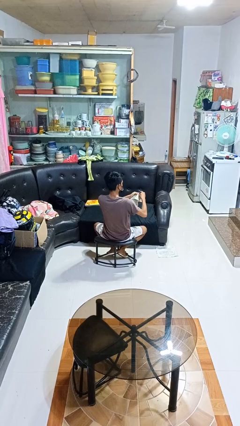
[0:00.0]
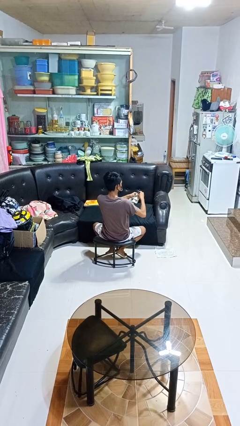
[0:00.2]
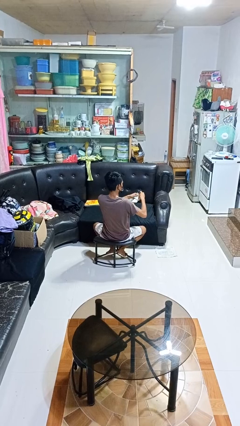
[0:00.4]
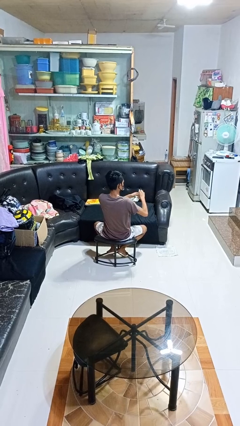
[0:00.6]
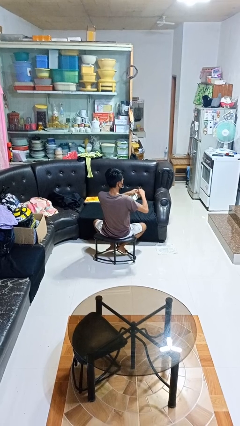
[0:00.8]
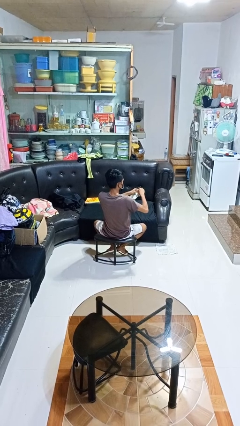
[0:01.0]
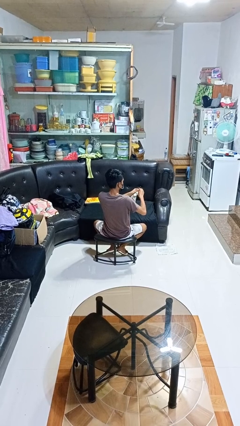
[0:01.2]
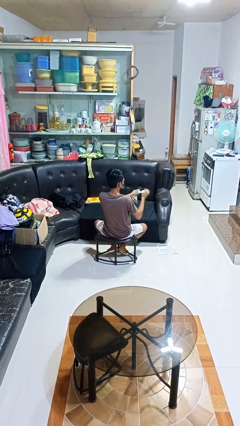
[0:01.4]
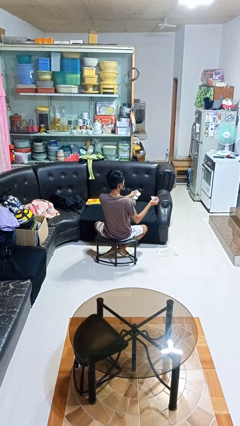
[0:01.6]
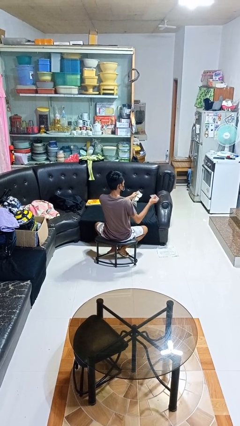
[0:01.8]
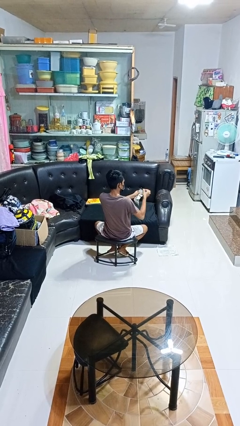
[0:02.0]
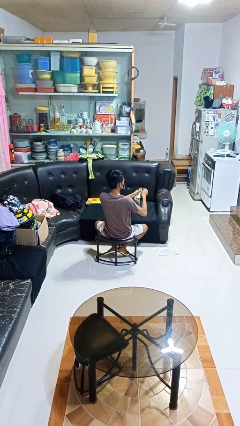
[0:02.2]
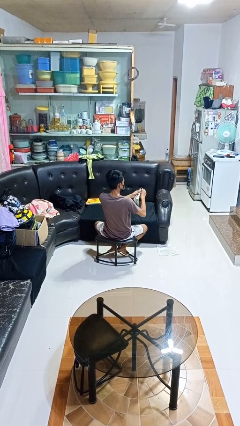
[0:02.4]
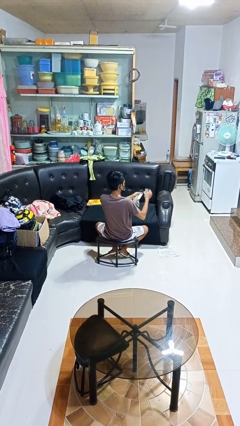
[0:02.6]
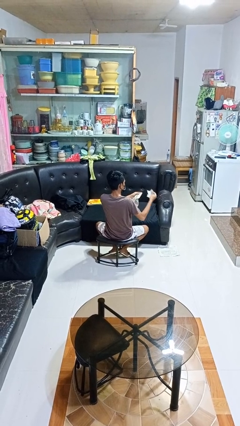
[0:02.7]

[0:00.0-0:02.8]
person tears paper

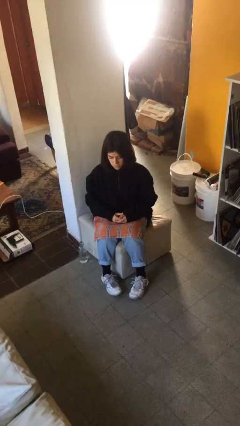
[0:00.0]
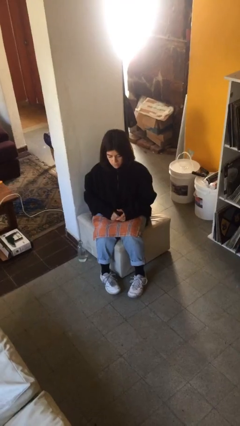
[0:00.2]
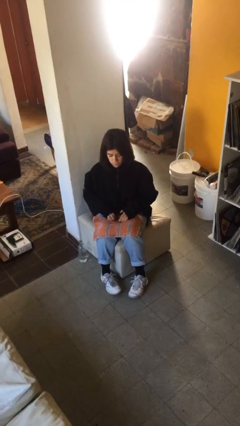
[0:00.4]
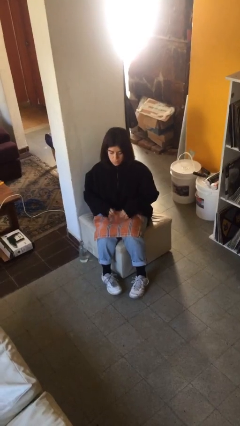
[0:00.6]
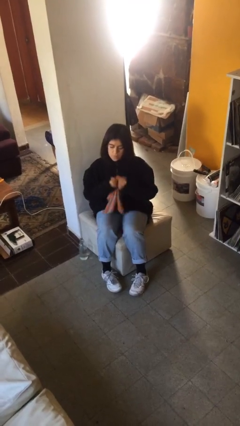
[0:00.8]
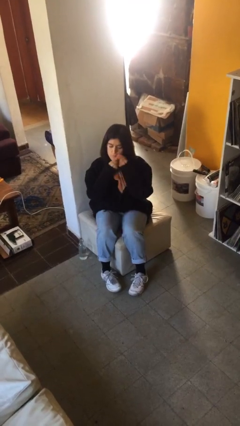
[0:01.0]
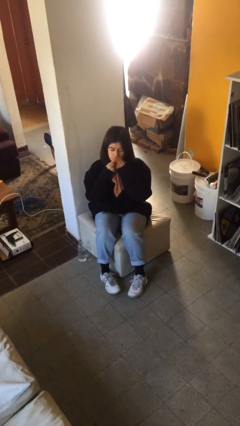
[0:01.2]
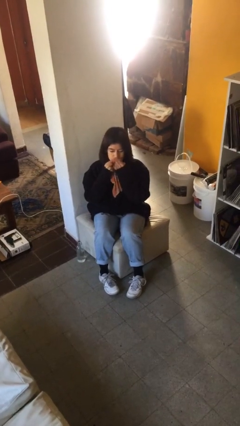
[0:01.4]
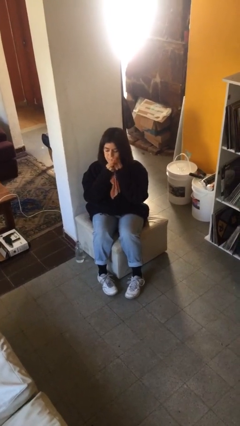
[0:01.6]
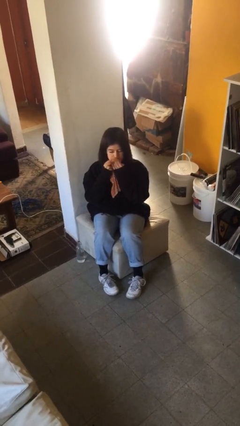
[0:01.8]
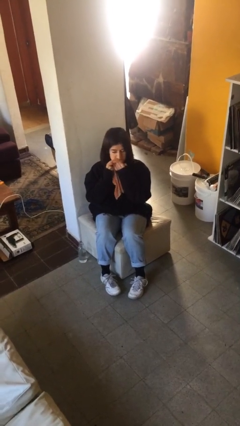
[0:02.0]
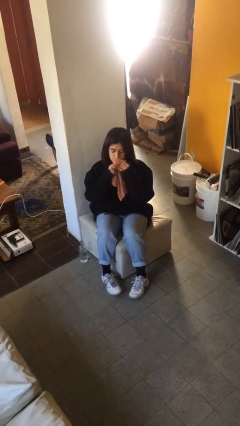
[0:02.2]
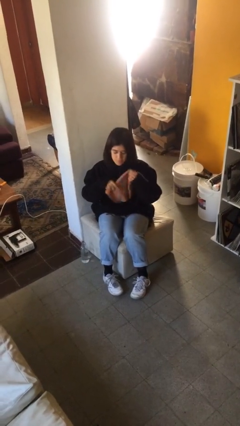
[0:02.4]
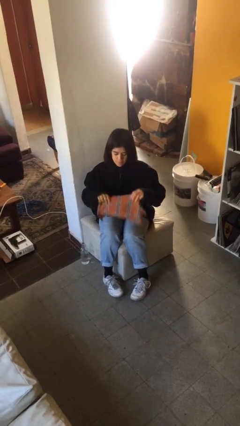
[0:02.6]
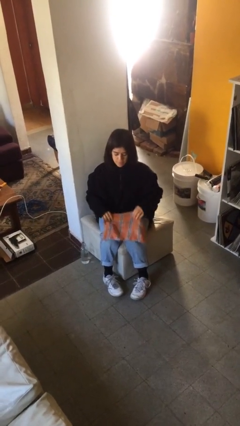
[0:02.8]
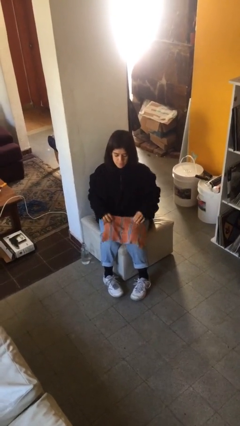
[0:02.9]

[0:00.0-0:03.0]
person wipes mouth with napkin

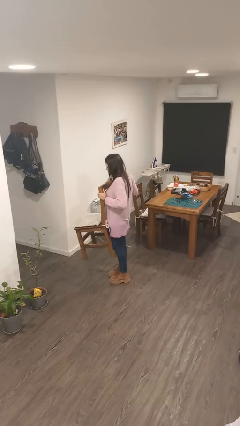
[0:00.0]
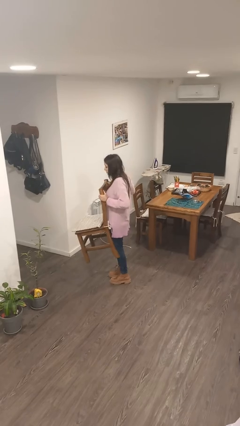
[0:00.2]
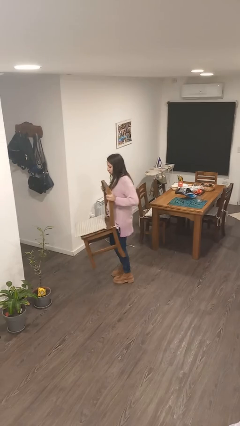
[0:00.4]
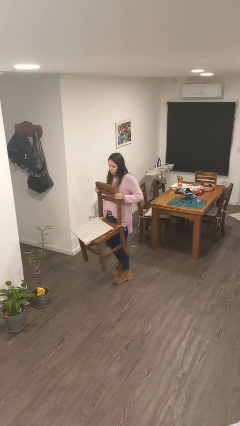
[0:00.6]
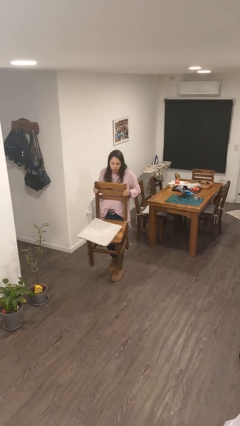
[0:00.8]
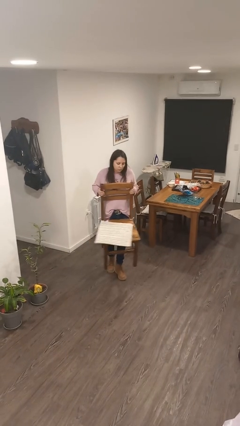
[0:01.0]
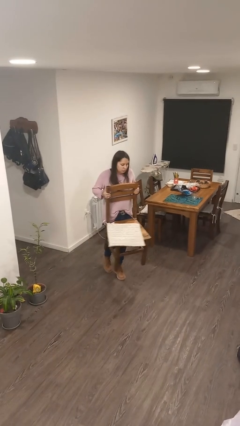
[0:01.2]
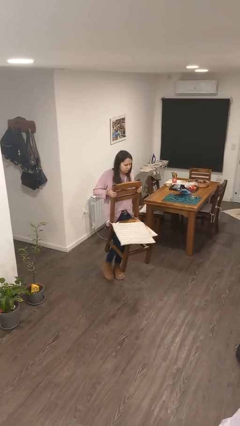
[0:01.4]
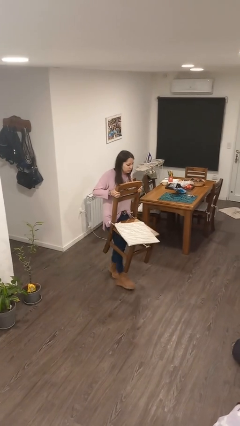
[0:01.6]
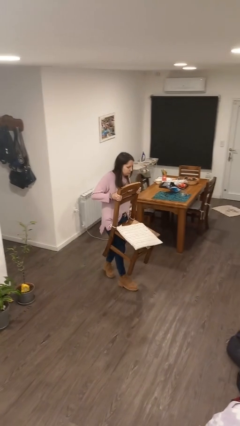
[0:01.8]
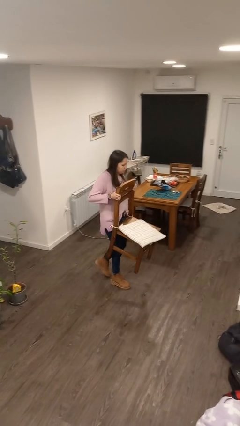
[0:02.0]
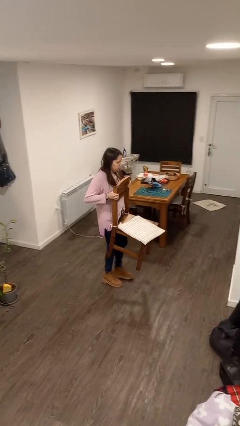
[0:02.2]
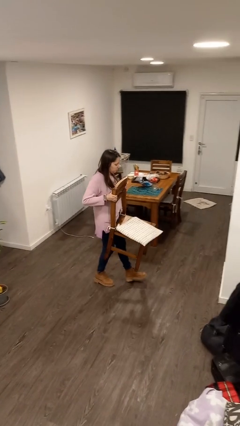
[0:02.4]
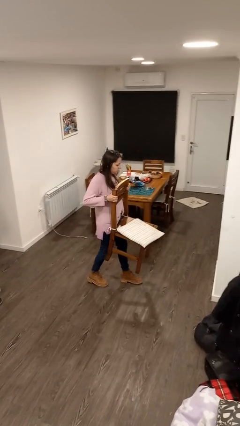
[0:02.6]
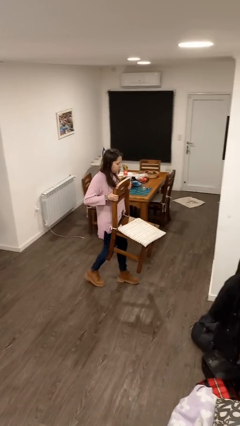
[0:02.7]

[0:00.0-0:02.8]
person carries furniture

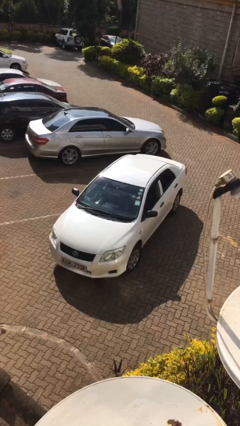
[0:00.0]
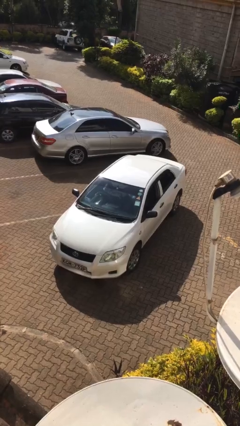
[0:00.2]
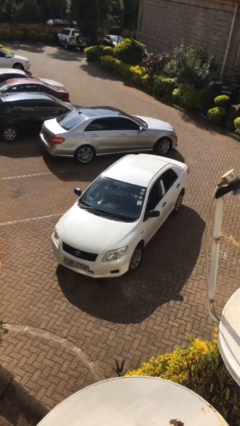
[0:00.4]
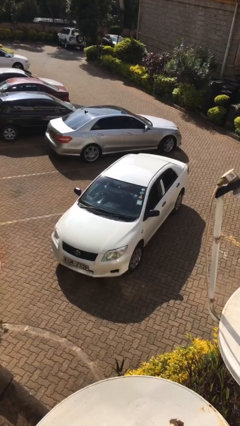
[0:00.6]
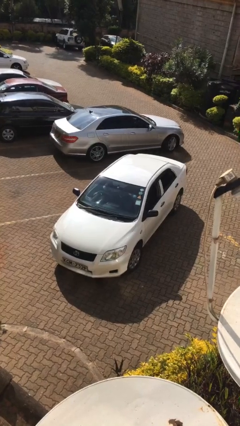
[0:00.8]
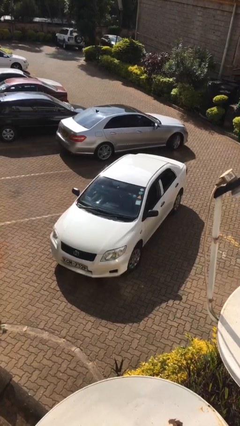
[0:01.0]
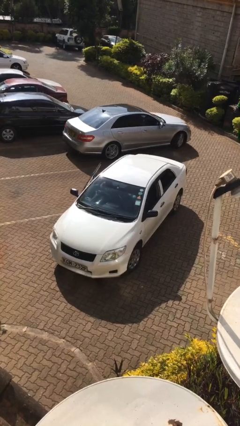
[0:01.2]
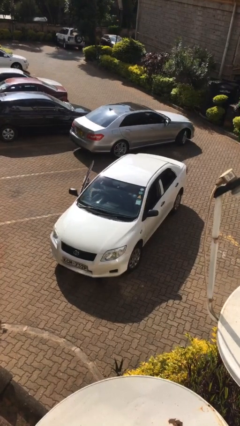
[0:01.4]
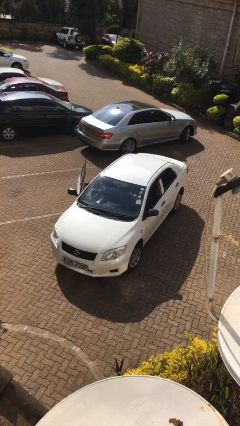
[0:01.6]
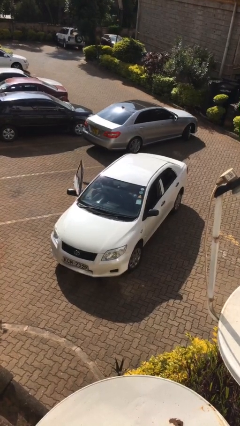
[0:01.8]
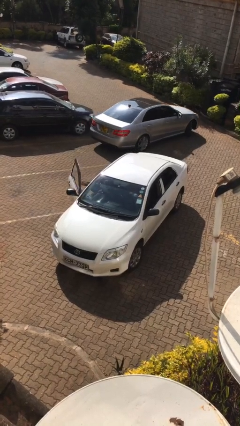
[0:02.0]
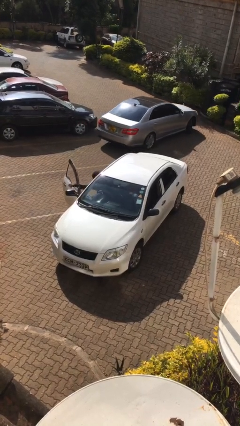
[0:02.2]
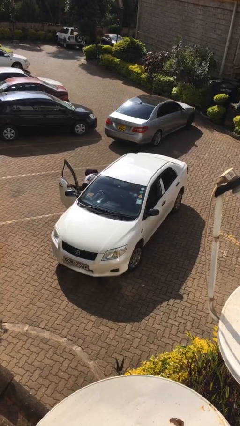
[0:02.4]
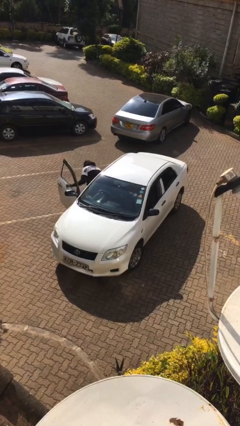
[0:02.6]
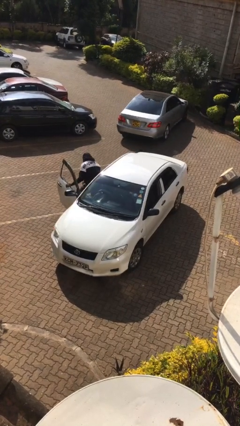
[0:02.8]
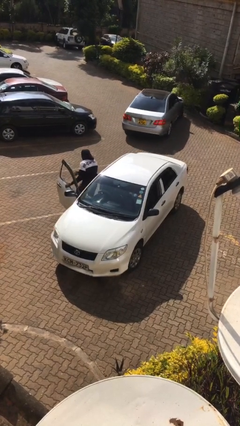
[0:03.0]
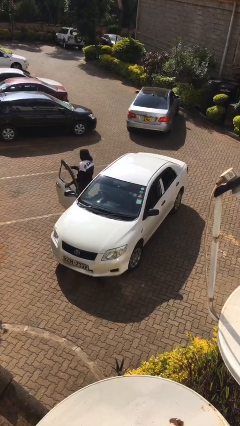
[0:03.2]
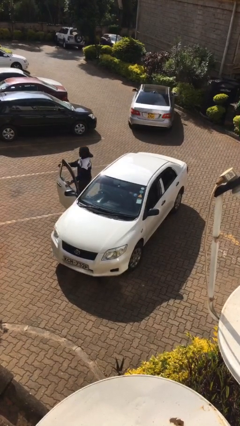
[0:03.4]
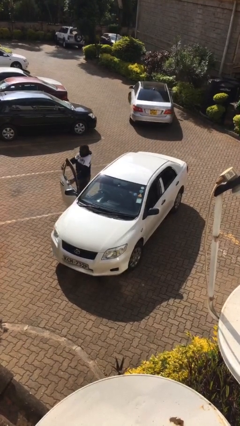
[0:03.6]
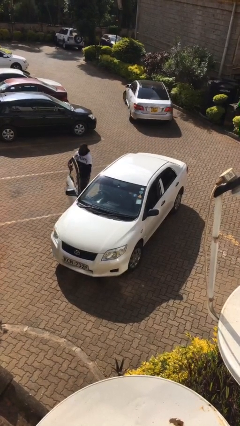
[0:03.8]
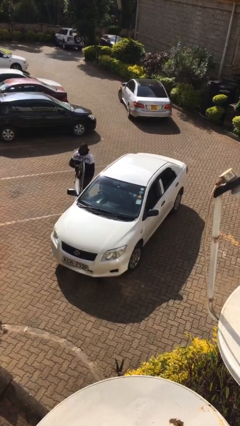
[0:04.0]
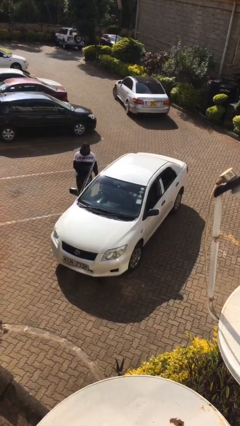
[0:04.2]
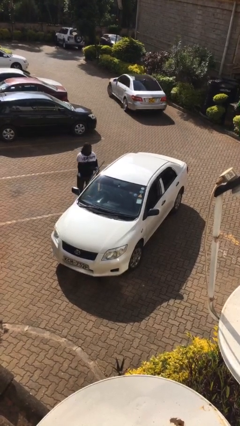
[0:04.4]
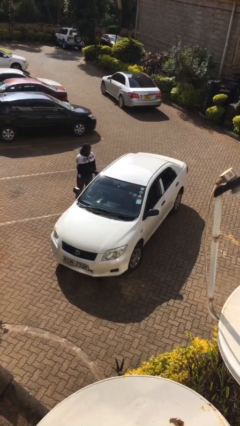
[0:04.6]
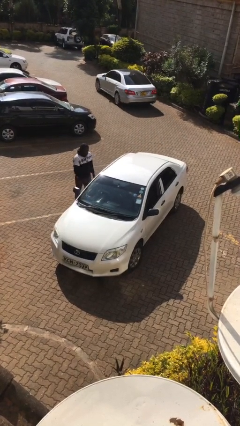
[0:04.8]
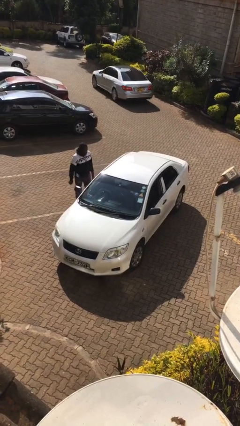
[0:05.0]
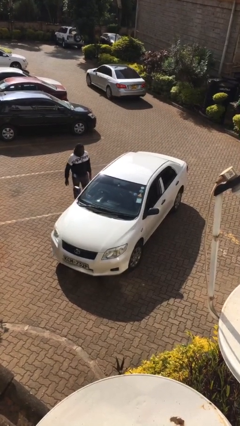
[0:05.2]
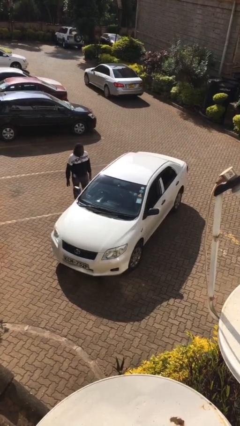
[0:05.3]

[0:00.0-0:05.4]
car drops off person

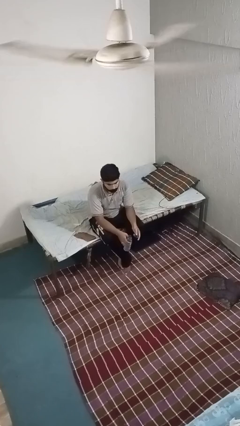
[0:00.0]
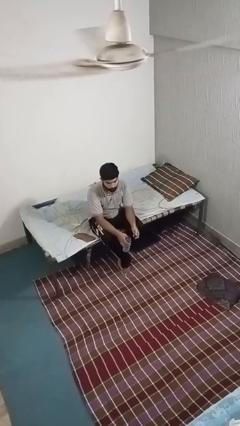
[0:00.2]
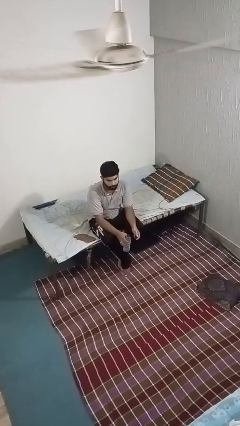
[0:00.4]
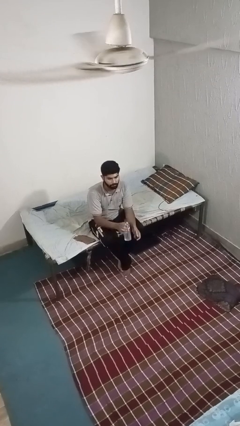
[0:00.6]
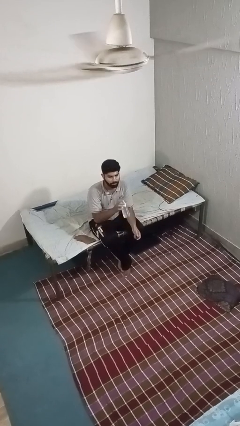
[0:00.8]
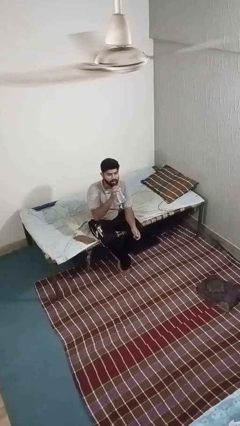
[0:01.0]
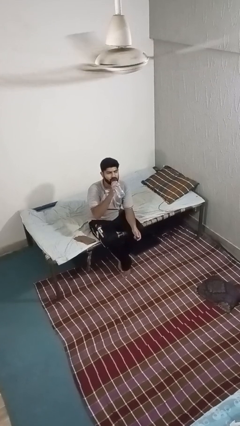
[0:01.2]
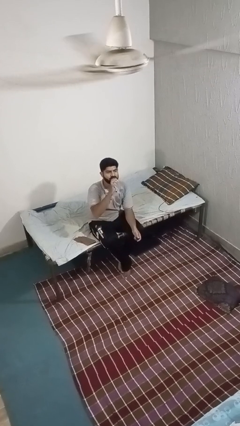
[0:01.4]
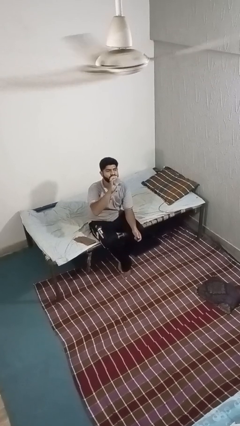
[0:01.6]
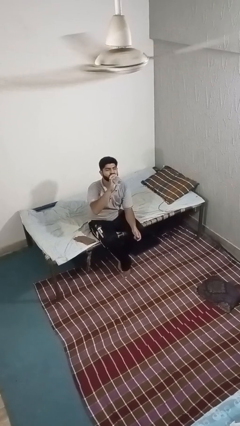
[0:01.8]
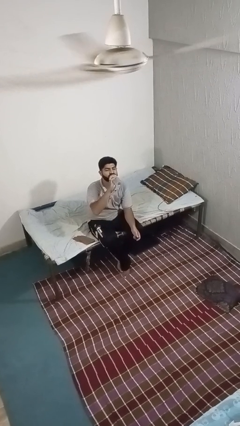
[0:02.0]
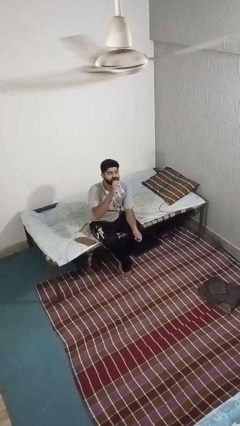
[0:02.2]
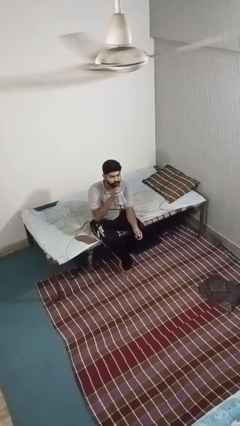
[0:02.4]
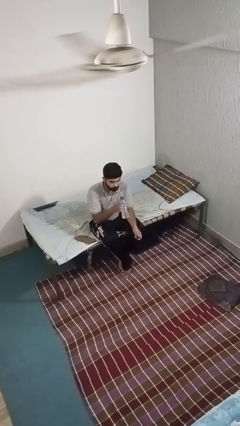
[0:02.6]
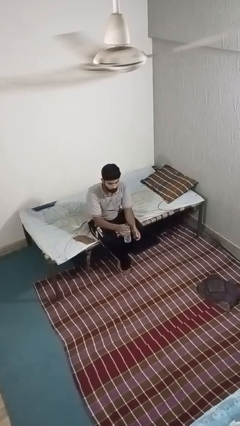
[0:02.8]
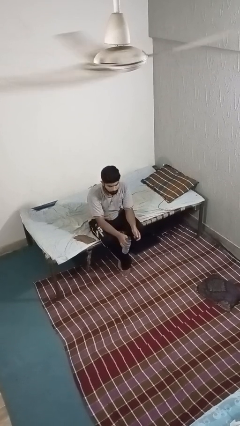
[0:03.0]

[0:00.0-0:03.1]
person drinks from bottle

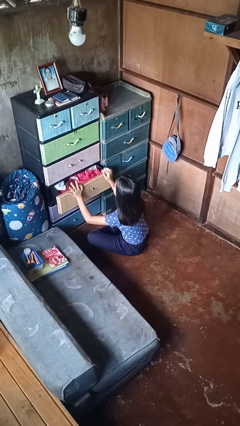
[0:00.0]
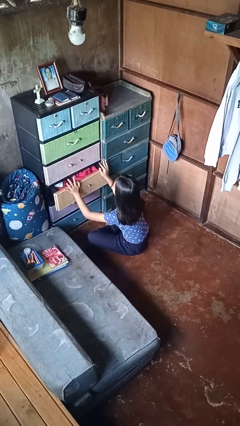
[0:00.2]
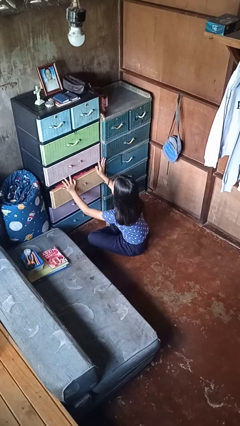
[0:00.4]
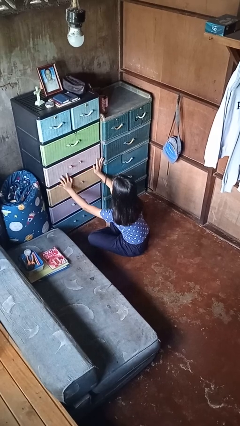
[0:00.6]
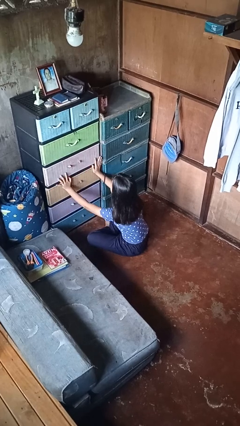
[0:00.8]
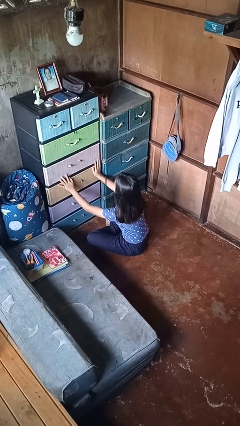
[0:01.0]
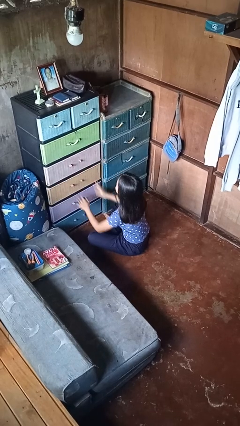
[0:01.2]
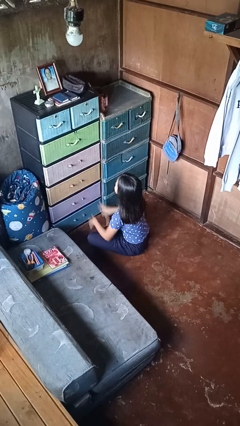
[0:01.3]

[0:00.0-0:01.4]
person closes dresser drawer
